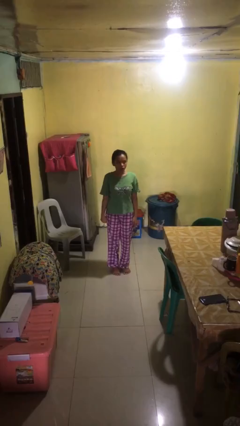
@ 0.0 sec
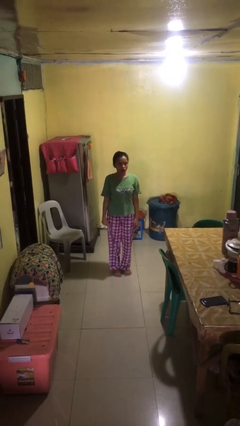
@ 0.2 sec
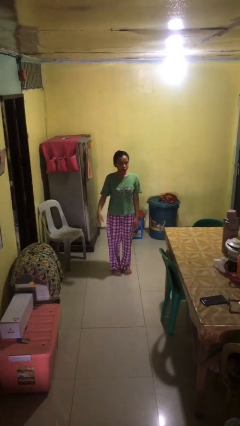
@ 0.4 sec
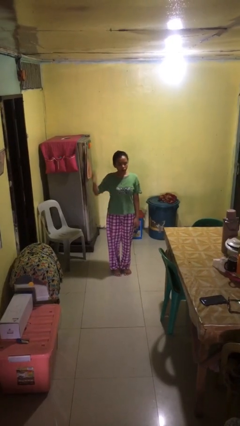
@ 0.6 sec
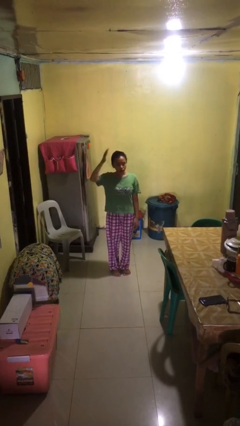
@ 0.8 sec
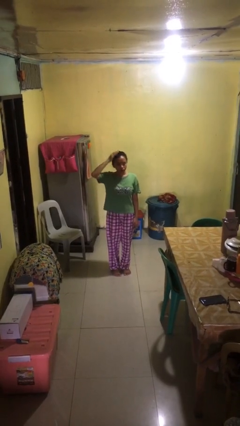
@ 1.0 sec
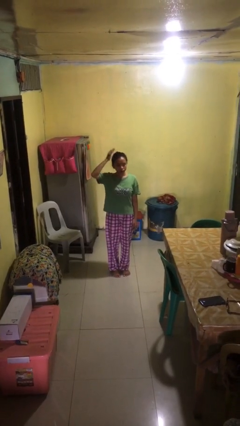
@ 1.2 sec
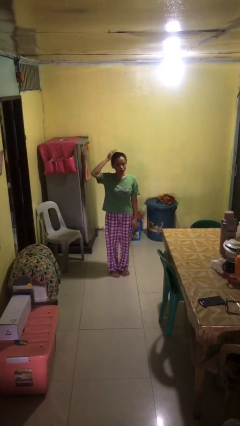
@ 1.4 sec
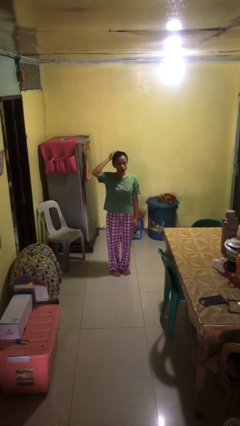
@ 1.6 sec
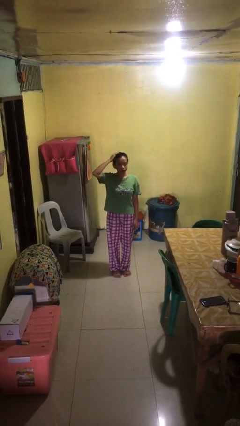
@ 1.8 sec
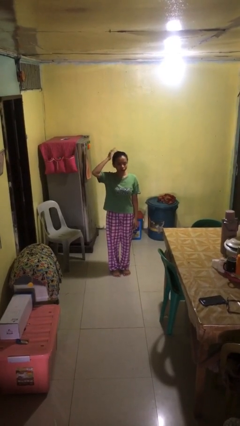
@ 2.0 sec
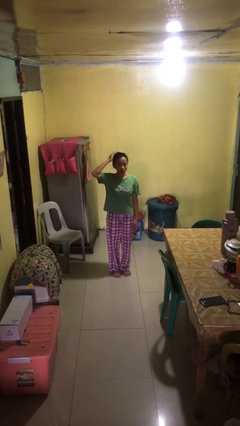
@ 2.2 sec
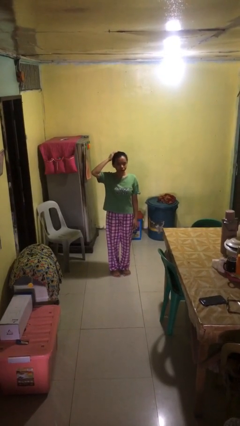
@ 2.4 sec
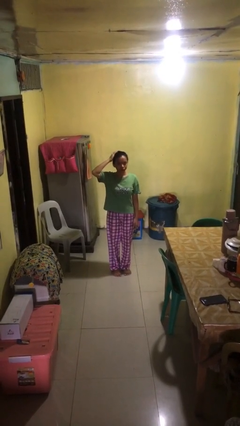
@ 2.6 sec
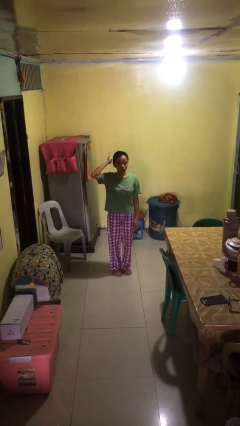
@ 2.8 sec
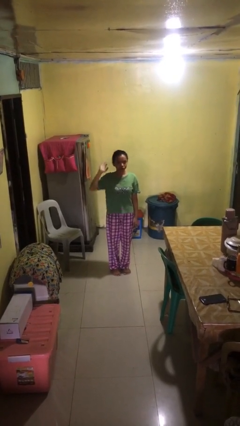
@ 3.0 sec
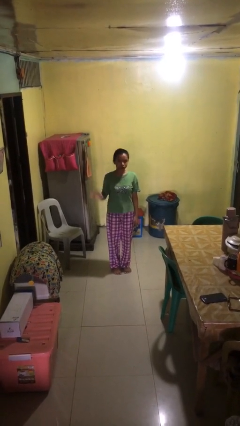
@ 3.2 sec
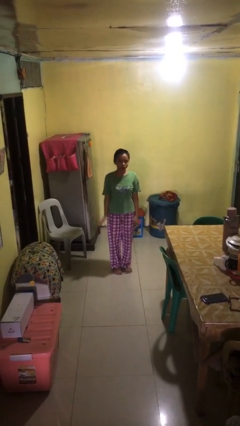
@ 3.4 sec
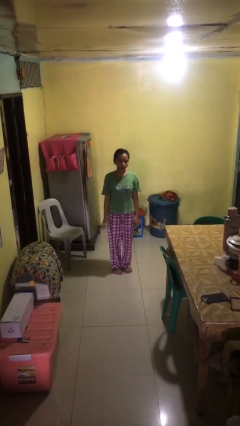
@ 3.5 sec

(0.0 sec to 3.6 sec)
person pats head

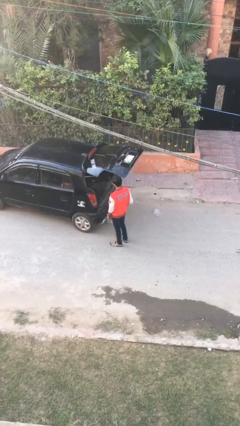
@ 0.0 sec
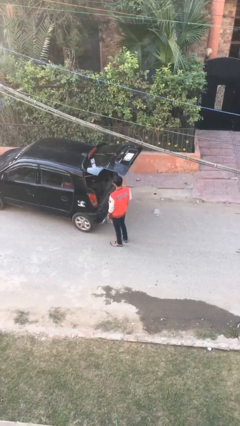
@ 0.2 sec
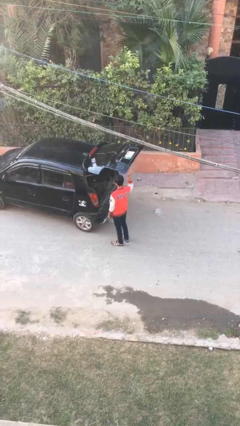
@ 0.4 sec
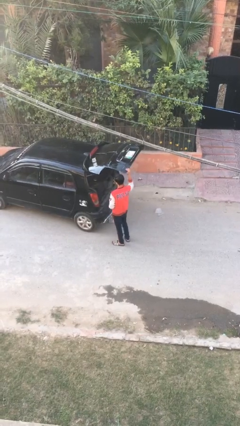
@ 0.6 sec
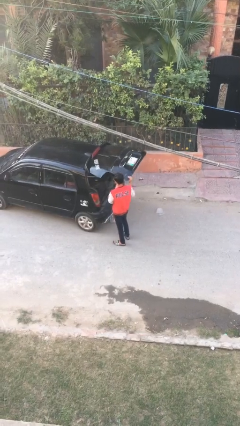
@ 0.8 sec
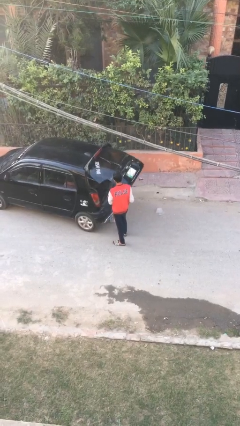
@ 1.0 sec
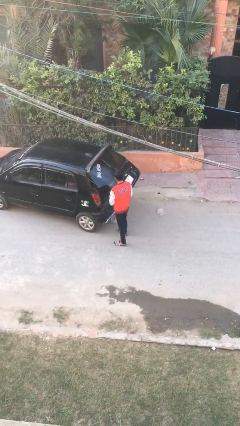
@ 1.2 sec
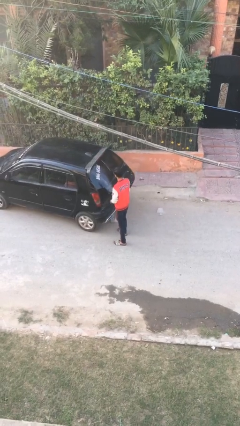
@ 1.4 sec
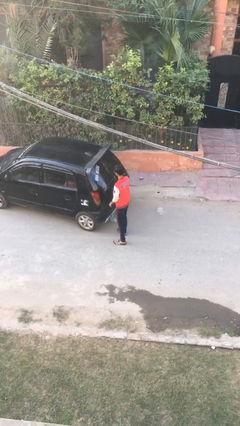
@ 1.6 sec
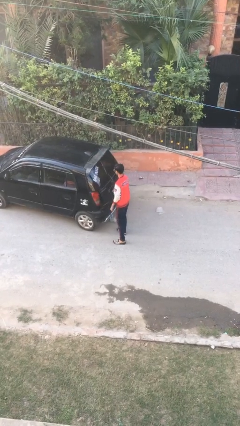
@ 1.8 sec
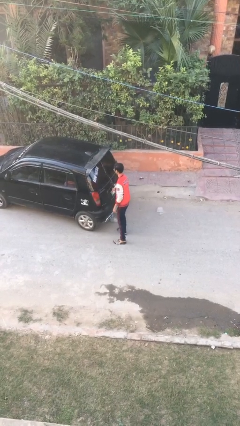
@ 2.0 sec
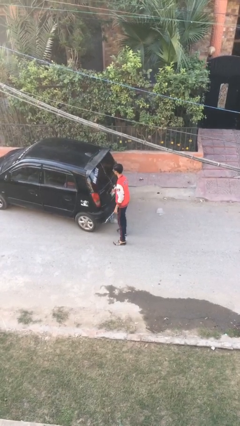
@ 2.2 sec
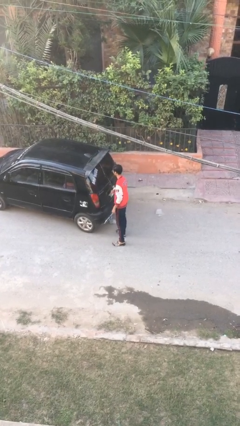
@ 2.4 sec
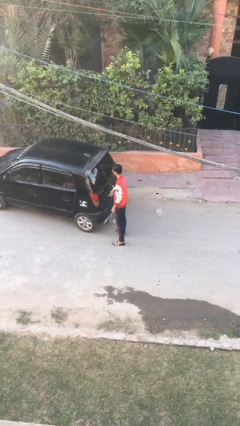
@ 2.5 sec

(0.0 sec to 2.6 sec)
person closes car trunk

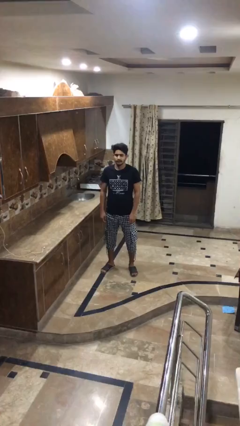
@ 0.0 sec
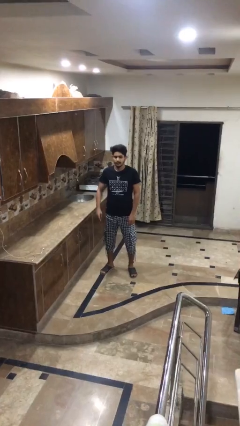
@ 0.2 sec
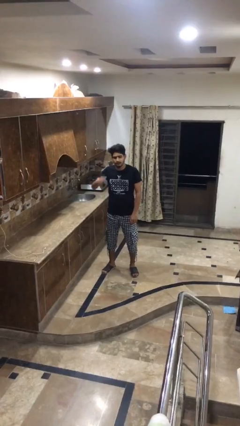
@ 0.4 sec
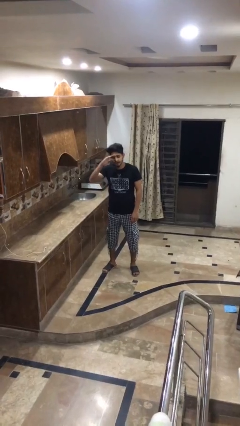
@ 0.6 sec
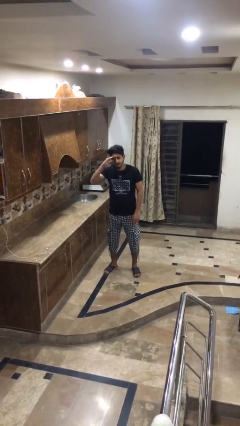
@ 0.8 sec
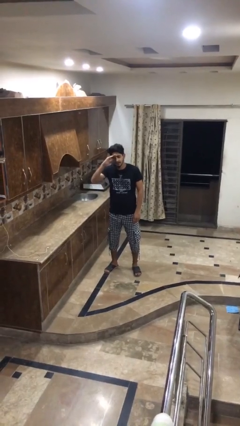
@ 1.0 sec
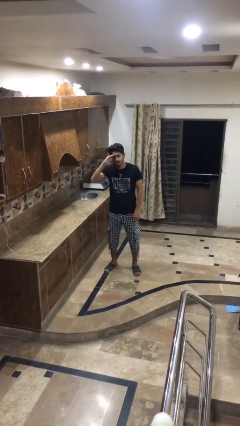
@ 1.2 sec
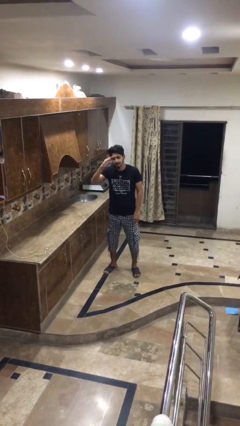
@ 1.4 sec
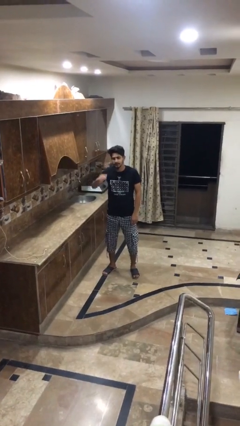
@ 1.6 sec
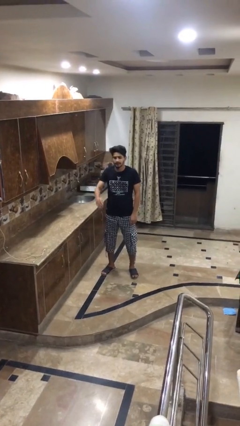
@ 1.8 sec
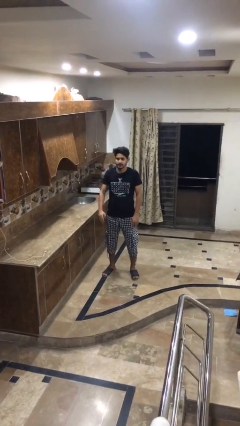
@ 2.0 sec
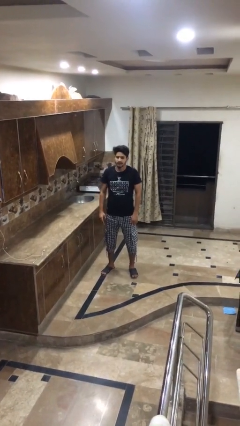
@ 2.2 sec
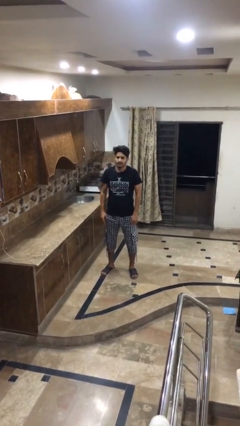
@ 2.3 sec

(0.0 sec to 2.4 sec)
person salutes

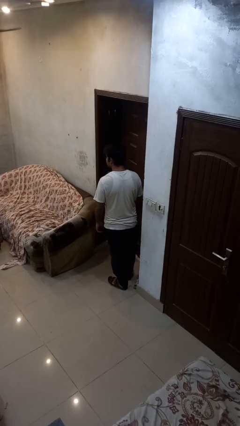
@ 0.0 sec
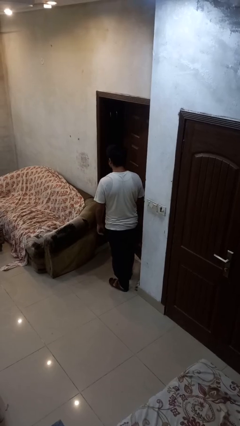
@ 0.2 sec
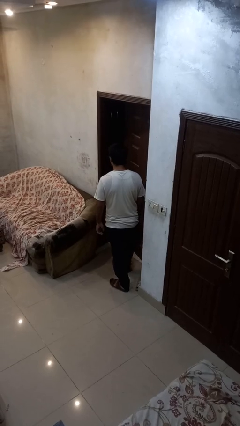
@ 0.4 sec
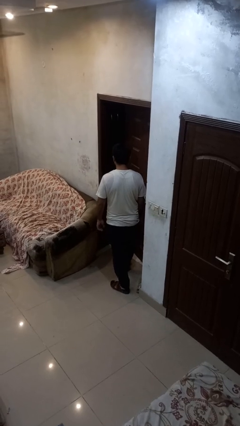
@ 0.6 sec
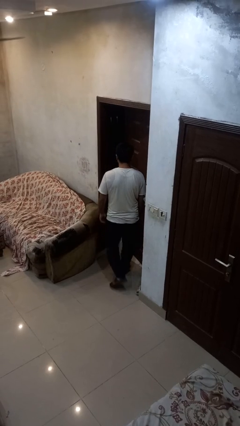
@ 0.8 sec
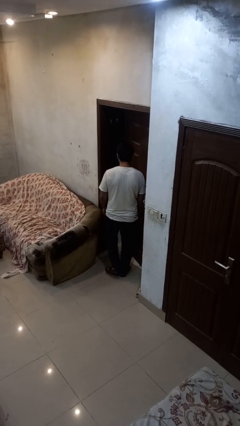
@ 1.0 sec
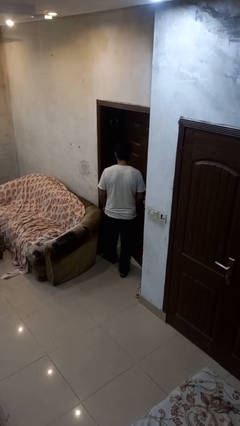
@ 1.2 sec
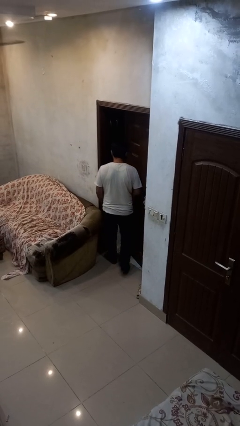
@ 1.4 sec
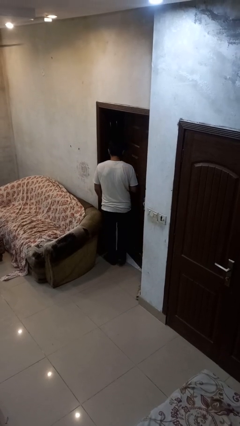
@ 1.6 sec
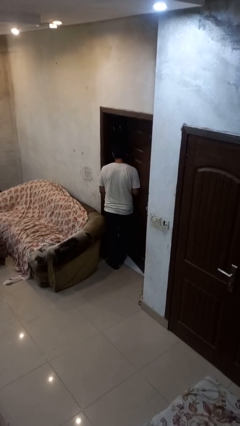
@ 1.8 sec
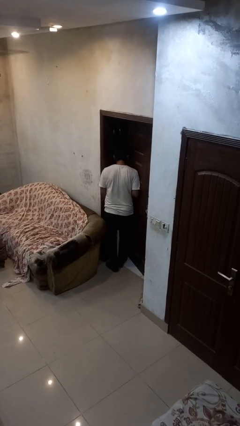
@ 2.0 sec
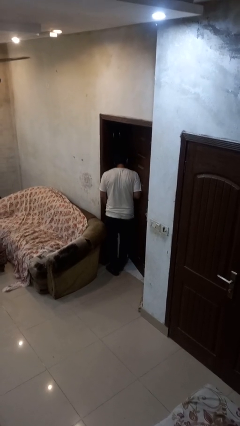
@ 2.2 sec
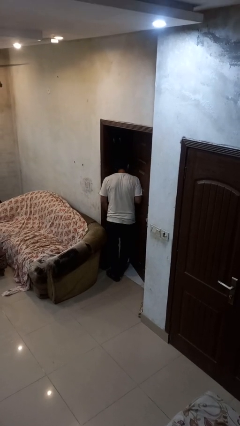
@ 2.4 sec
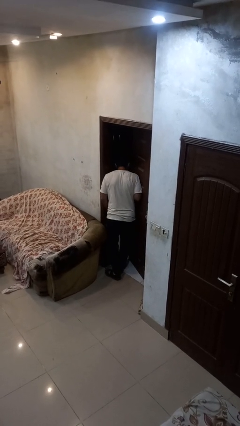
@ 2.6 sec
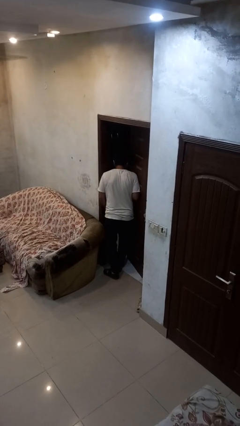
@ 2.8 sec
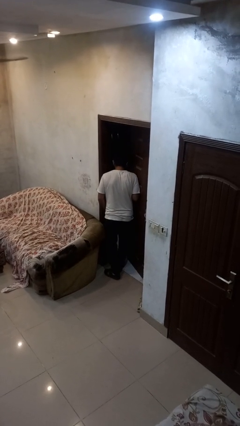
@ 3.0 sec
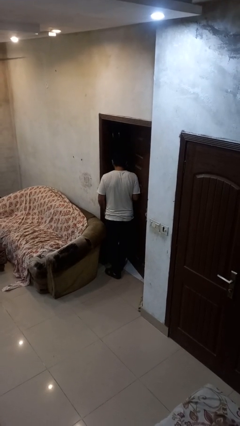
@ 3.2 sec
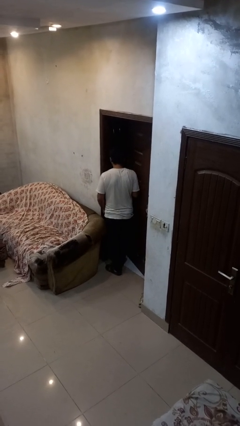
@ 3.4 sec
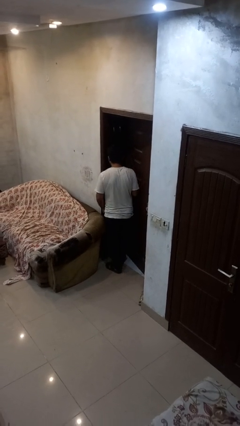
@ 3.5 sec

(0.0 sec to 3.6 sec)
person bumps into wall

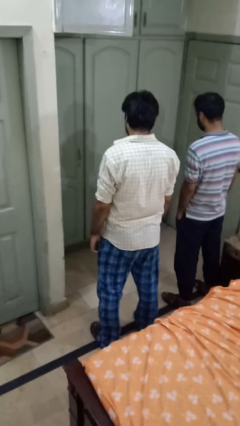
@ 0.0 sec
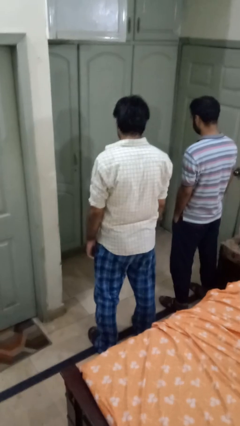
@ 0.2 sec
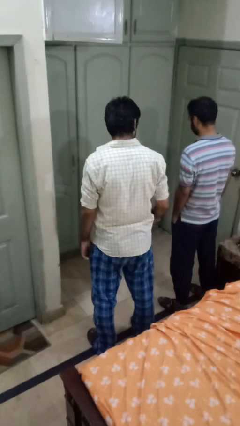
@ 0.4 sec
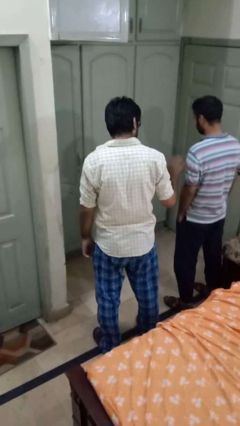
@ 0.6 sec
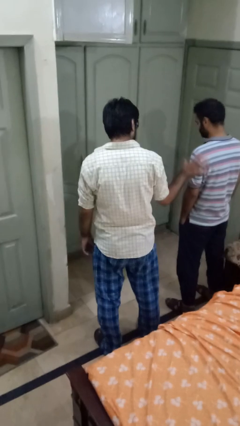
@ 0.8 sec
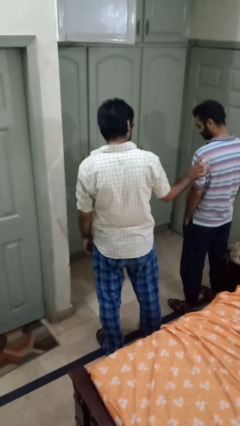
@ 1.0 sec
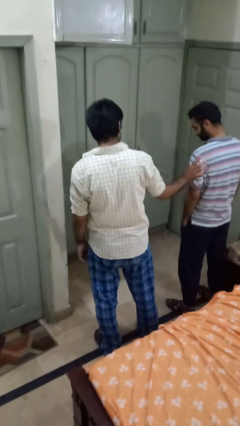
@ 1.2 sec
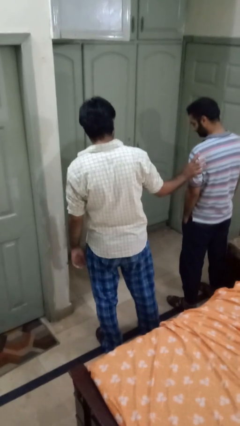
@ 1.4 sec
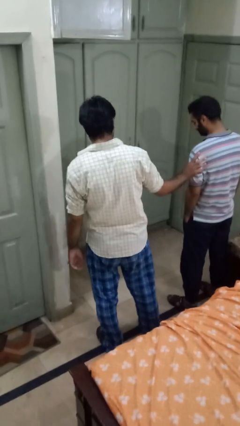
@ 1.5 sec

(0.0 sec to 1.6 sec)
person grabs person by bicep

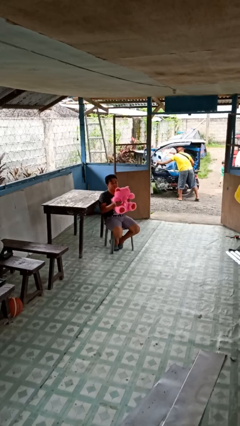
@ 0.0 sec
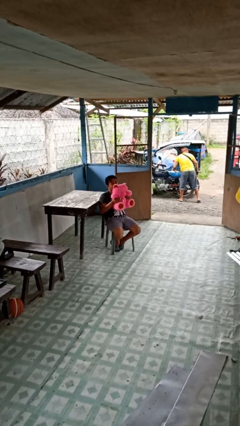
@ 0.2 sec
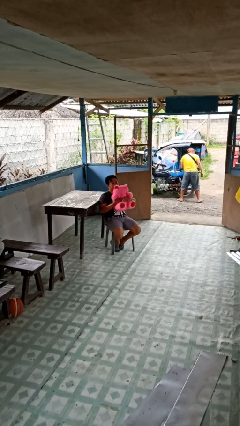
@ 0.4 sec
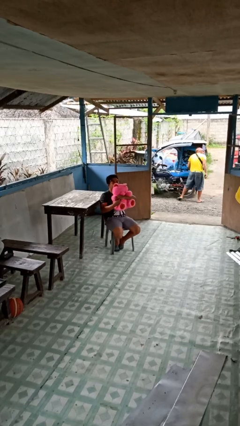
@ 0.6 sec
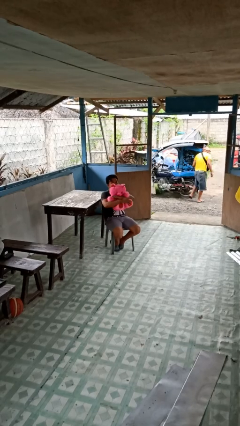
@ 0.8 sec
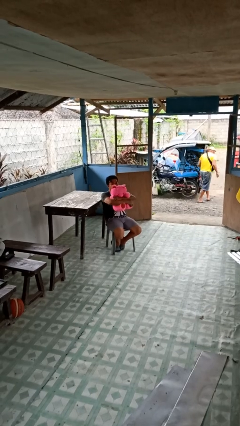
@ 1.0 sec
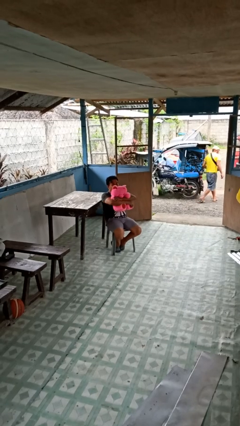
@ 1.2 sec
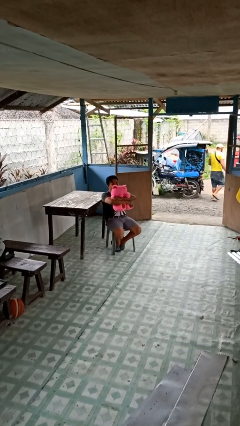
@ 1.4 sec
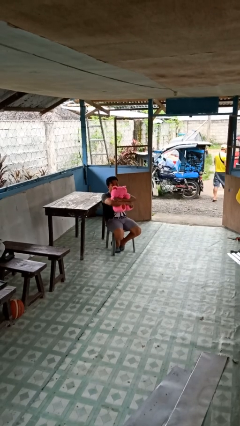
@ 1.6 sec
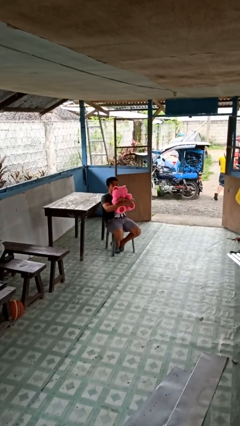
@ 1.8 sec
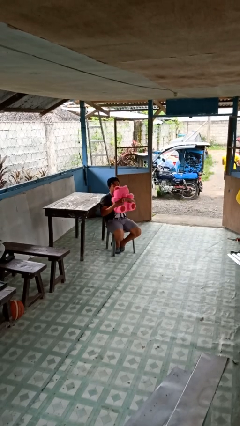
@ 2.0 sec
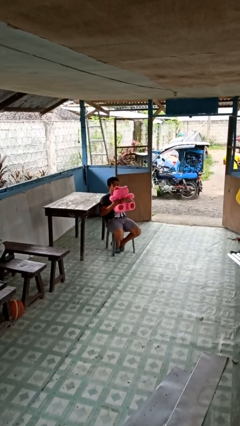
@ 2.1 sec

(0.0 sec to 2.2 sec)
person hugs stuffed animal

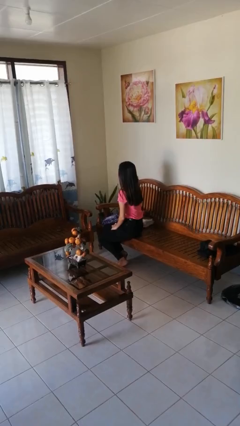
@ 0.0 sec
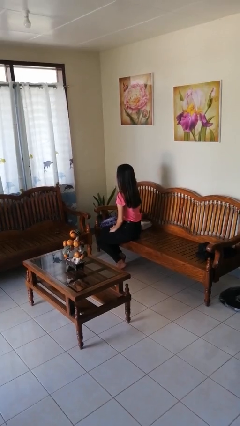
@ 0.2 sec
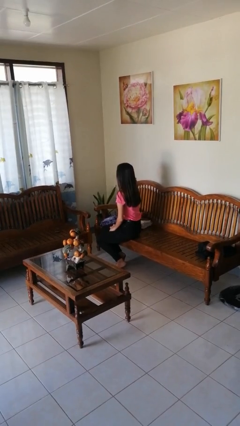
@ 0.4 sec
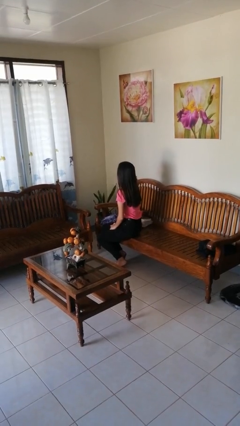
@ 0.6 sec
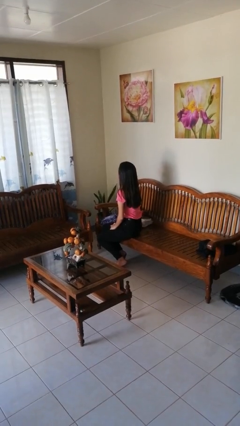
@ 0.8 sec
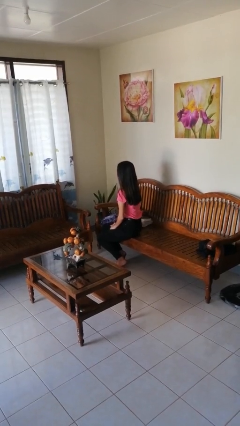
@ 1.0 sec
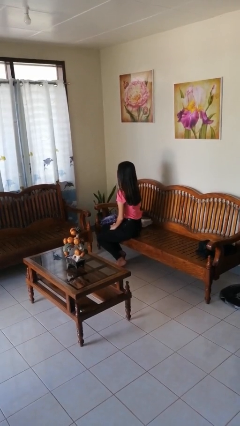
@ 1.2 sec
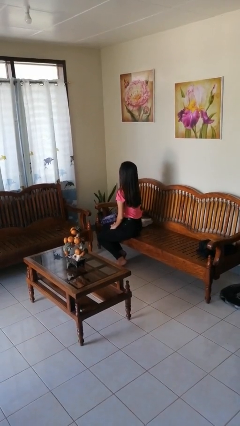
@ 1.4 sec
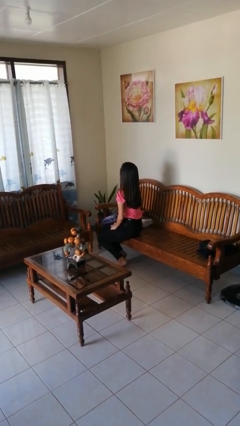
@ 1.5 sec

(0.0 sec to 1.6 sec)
person nods head
